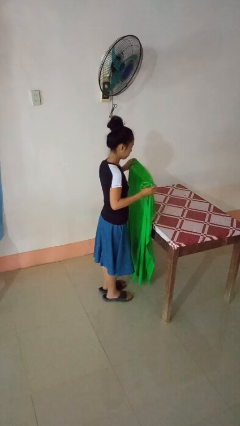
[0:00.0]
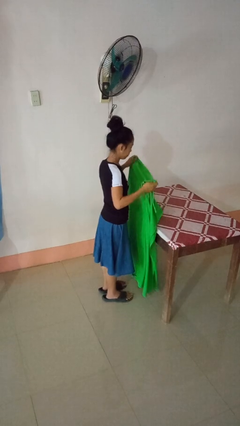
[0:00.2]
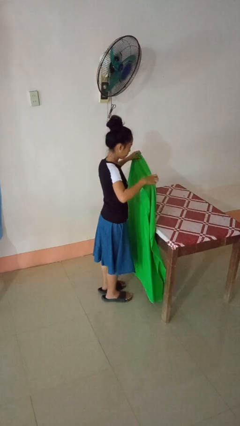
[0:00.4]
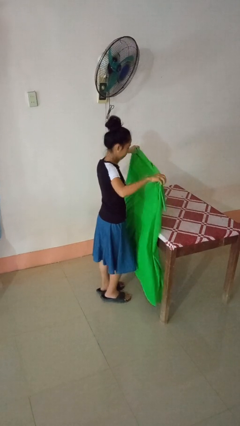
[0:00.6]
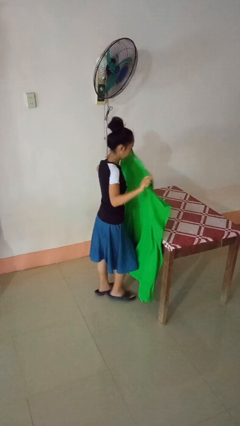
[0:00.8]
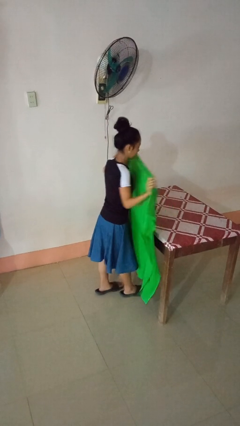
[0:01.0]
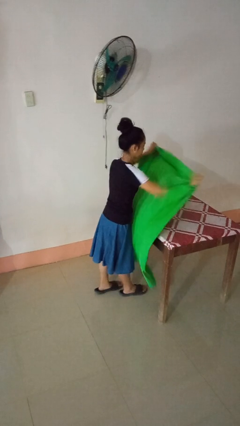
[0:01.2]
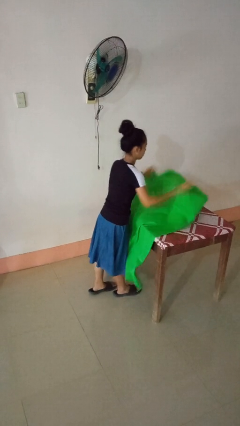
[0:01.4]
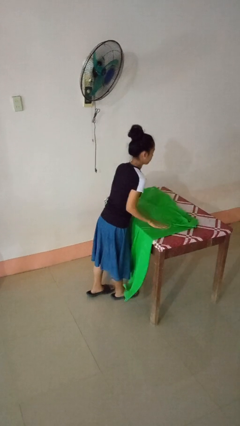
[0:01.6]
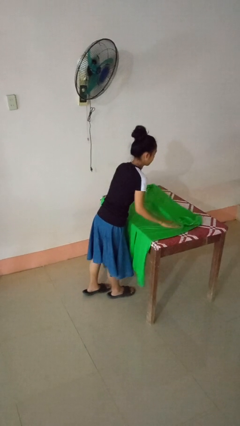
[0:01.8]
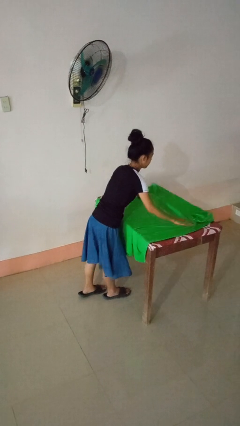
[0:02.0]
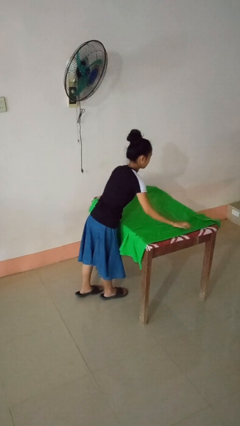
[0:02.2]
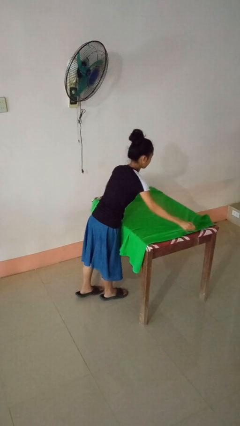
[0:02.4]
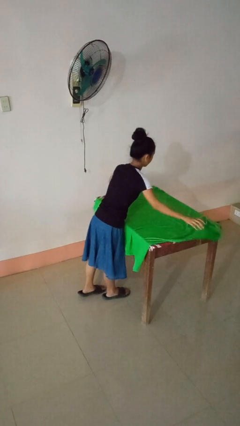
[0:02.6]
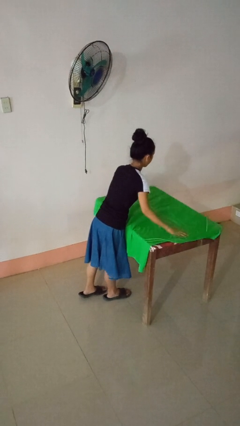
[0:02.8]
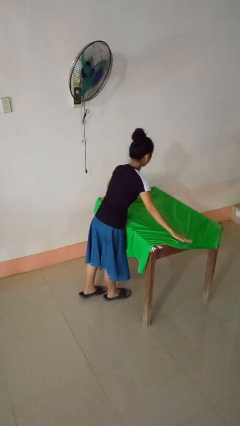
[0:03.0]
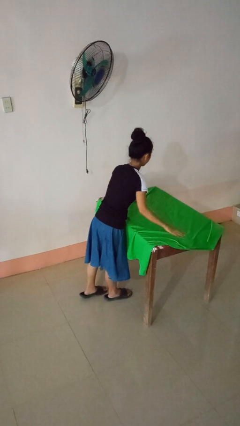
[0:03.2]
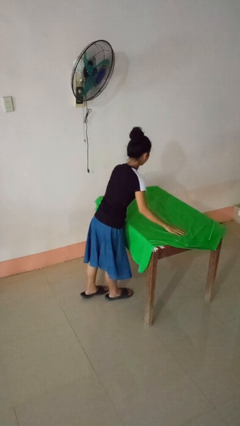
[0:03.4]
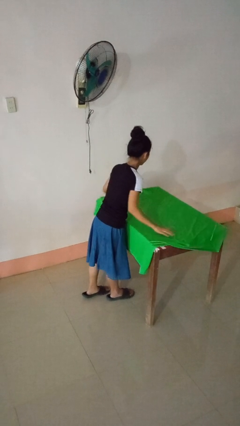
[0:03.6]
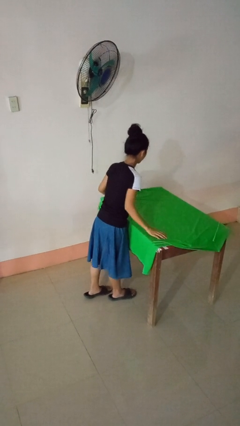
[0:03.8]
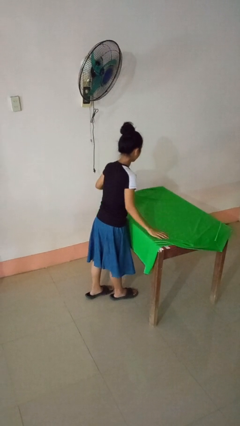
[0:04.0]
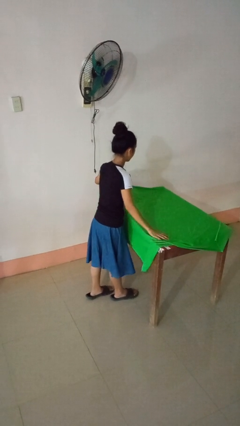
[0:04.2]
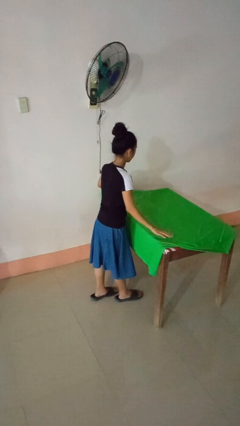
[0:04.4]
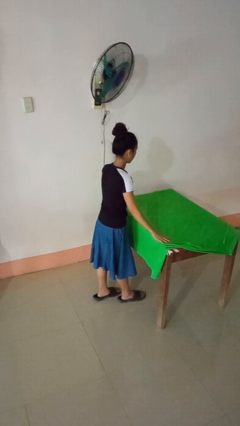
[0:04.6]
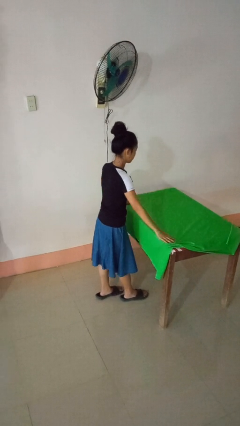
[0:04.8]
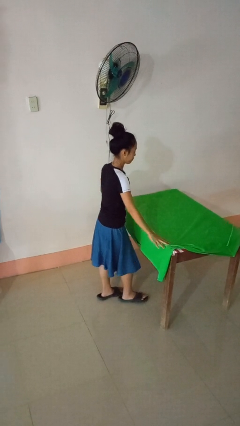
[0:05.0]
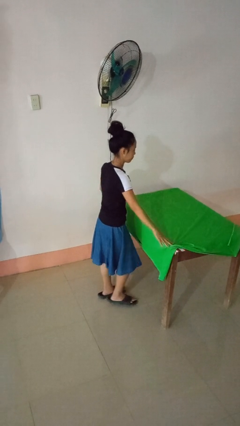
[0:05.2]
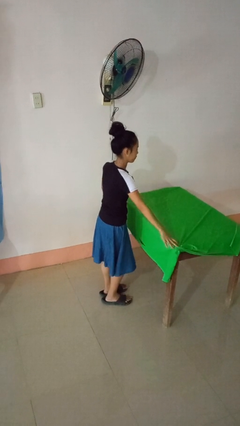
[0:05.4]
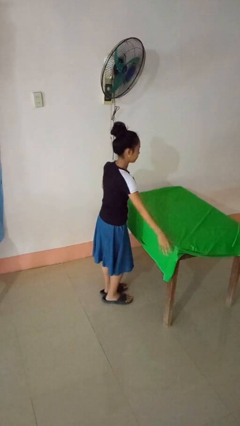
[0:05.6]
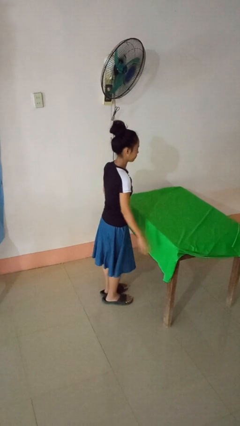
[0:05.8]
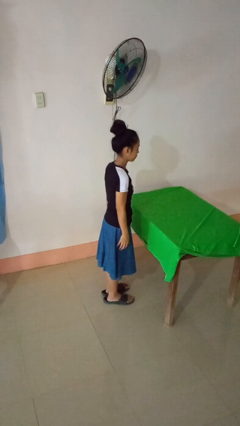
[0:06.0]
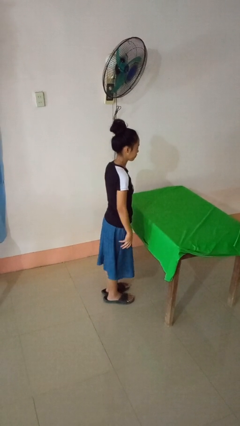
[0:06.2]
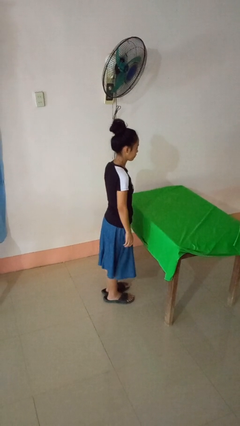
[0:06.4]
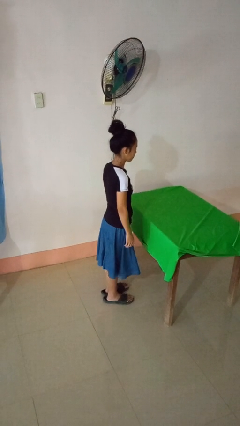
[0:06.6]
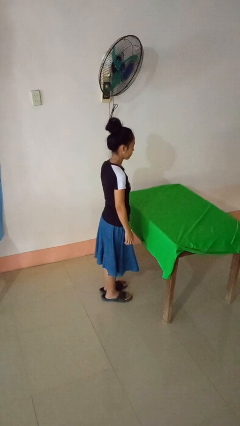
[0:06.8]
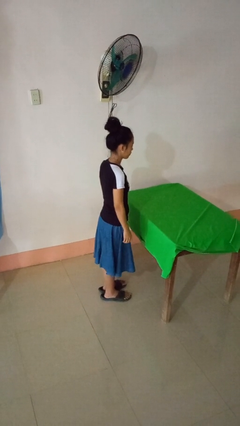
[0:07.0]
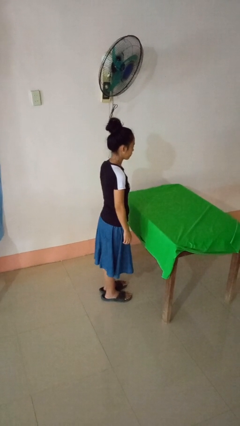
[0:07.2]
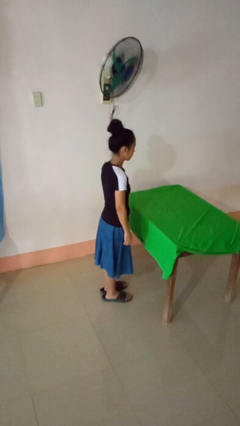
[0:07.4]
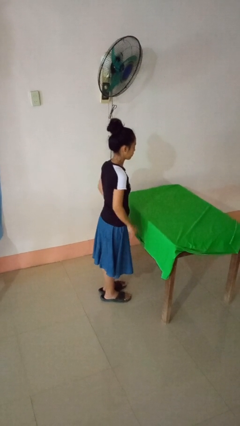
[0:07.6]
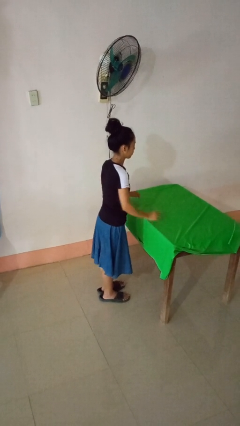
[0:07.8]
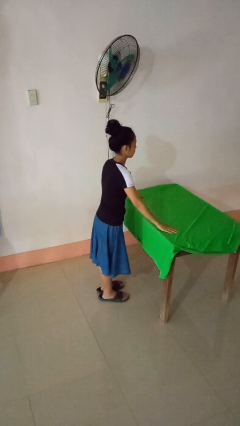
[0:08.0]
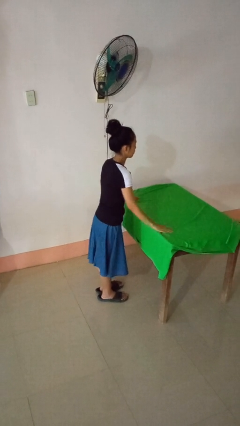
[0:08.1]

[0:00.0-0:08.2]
person spreads tablecloth

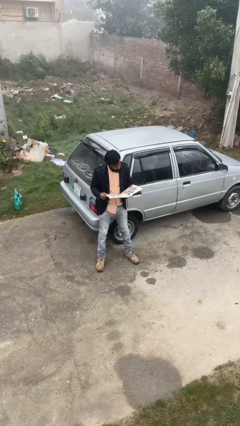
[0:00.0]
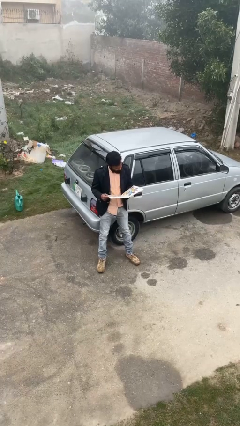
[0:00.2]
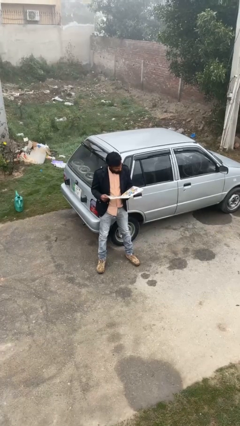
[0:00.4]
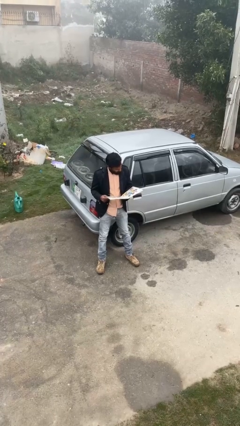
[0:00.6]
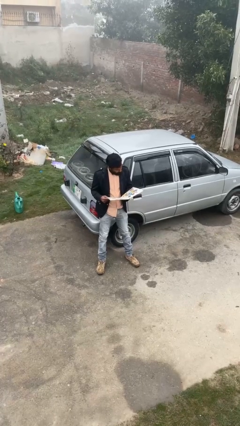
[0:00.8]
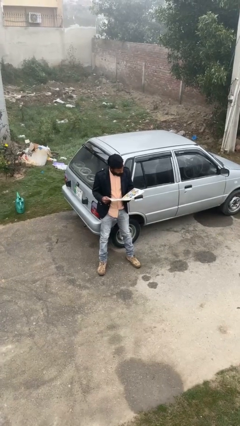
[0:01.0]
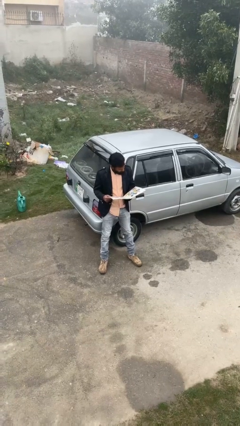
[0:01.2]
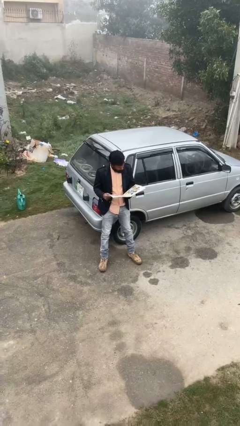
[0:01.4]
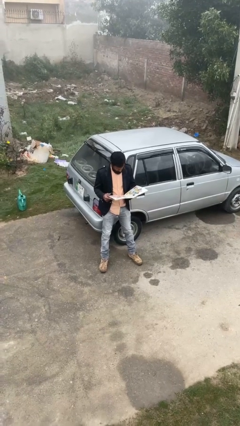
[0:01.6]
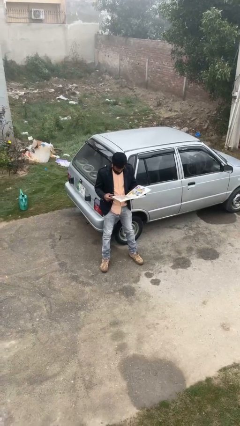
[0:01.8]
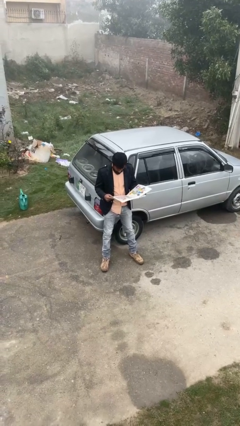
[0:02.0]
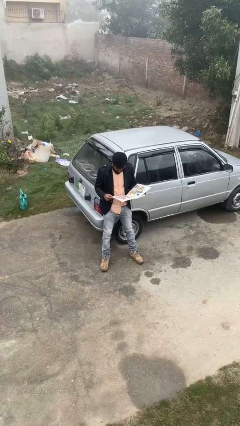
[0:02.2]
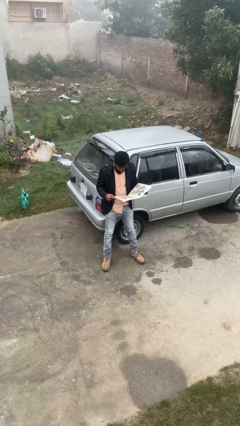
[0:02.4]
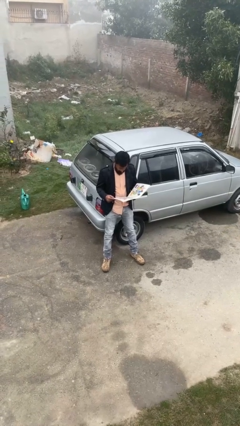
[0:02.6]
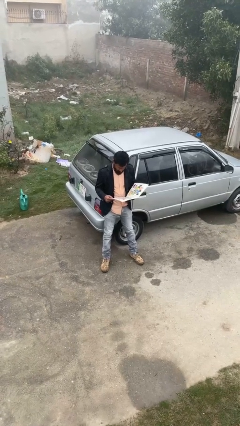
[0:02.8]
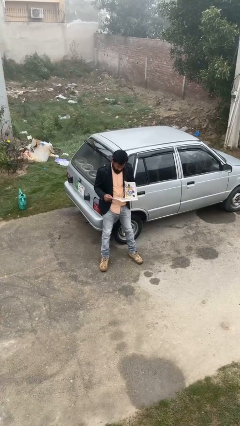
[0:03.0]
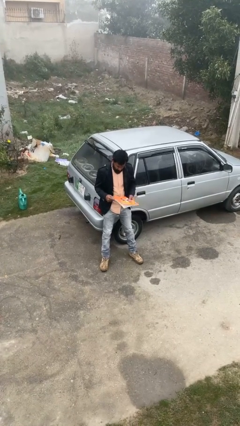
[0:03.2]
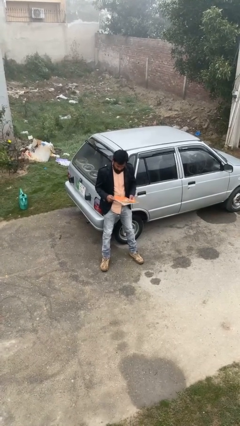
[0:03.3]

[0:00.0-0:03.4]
person reads document

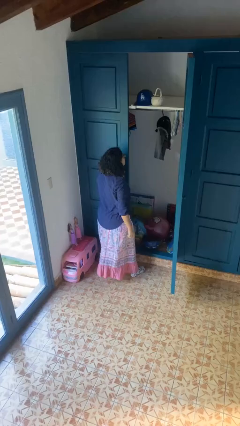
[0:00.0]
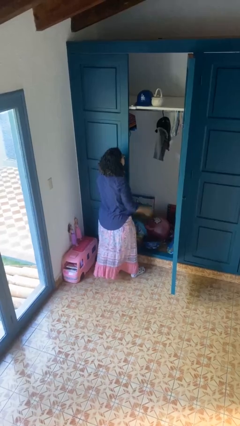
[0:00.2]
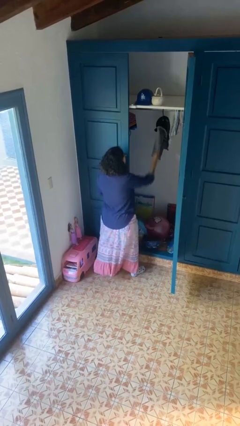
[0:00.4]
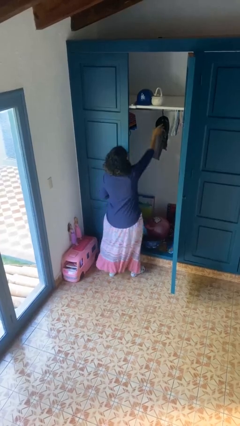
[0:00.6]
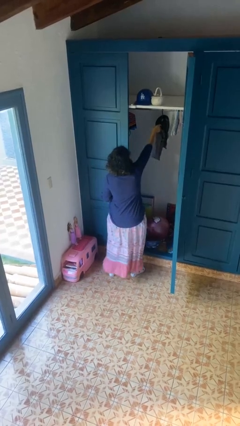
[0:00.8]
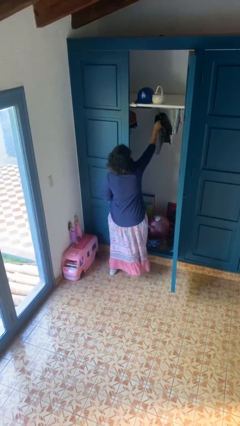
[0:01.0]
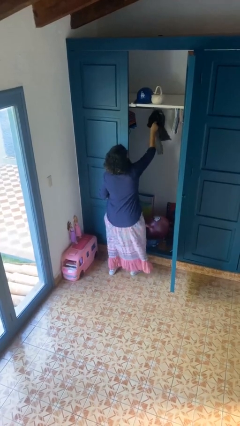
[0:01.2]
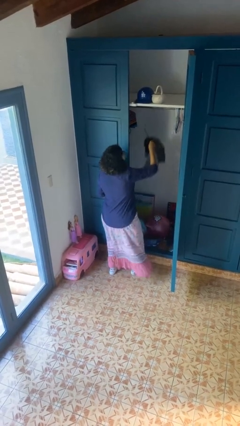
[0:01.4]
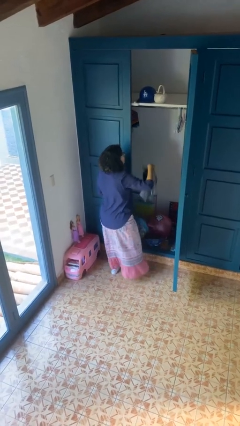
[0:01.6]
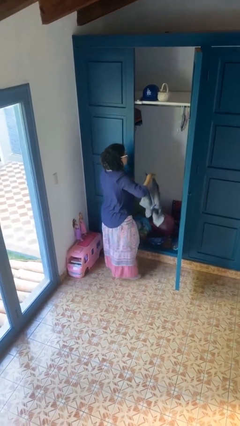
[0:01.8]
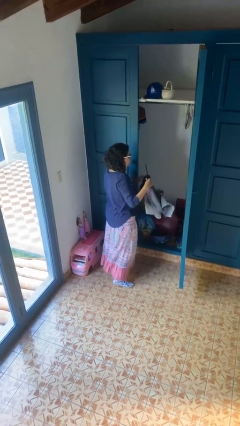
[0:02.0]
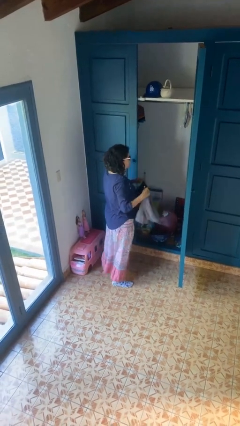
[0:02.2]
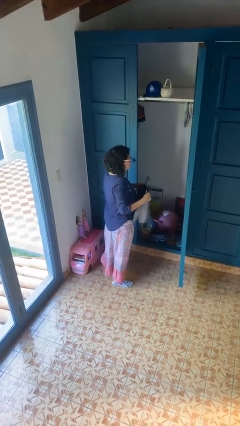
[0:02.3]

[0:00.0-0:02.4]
person takes clothes from closet

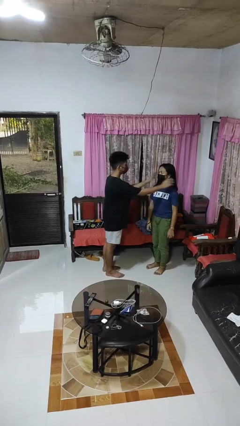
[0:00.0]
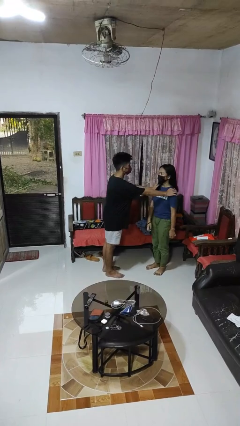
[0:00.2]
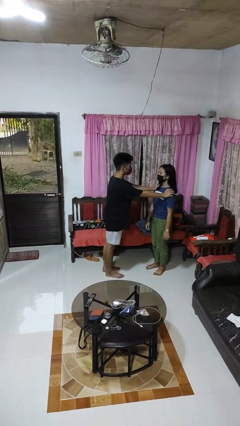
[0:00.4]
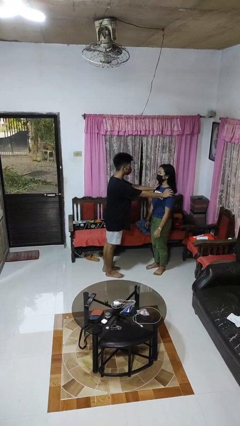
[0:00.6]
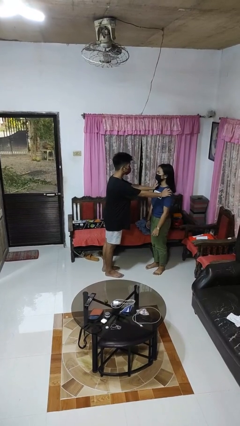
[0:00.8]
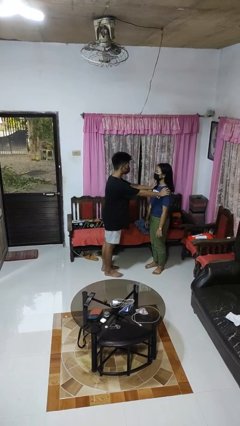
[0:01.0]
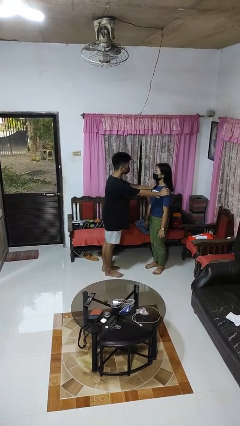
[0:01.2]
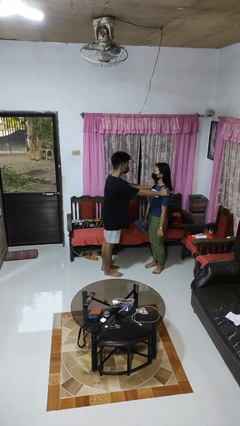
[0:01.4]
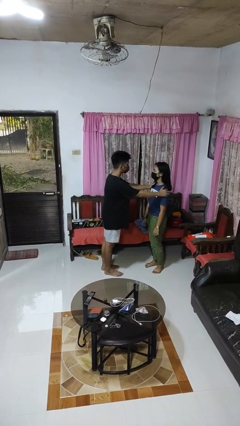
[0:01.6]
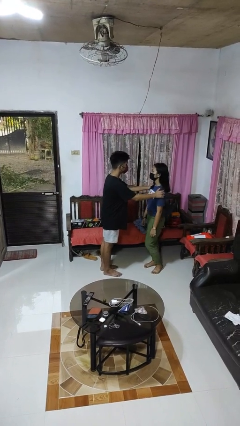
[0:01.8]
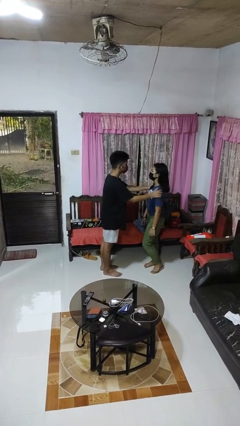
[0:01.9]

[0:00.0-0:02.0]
person grabs person by shoulder

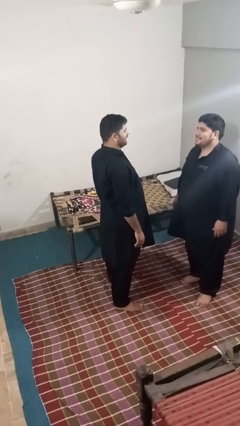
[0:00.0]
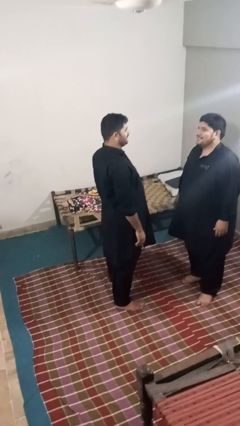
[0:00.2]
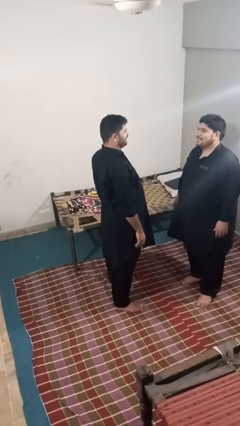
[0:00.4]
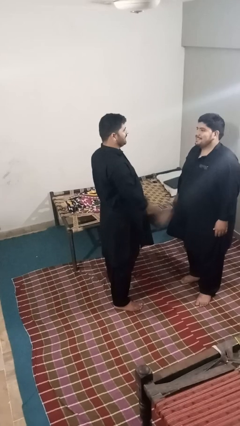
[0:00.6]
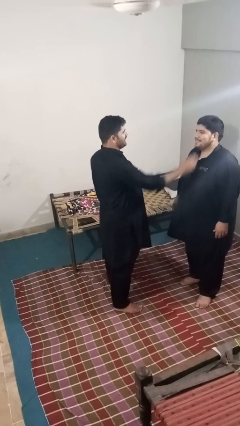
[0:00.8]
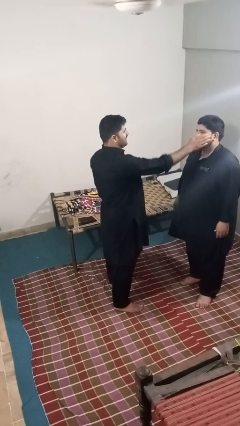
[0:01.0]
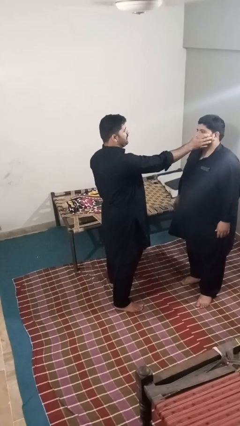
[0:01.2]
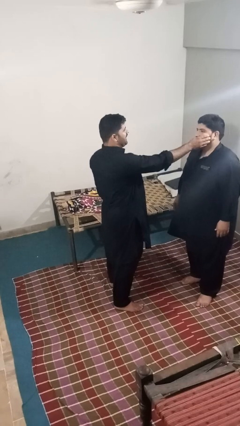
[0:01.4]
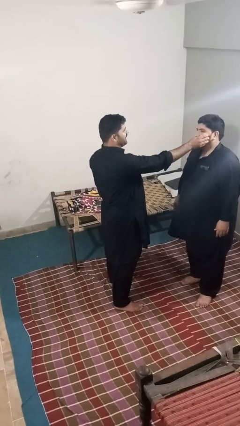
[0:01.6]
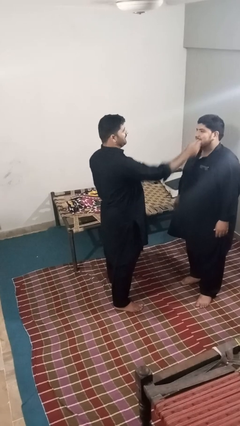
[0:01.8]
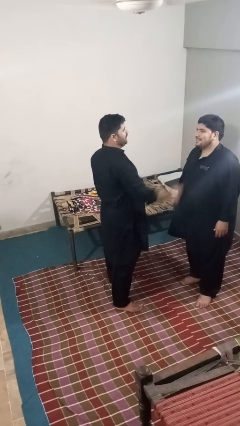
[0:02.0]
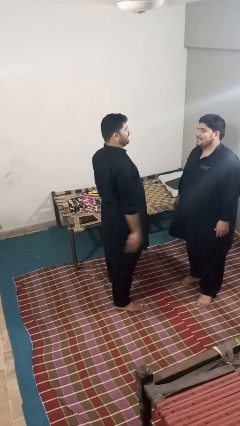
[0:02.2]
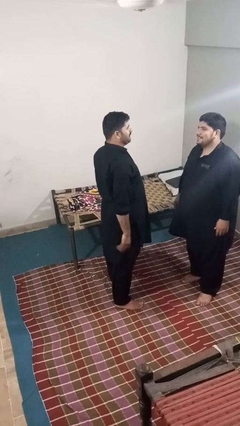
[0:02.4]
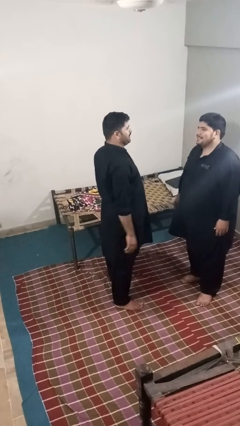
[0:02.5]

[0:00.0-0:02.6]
person touches face of person
